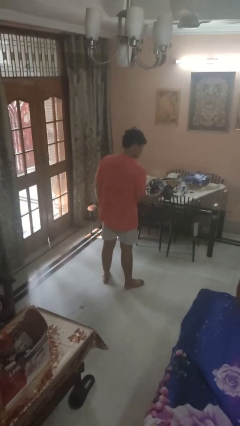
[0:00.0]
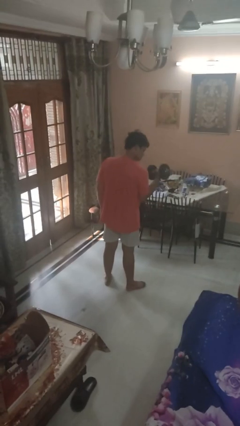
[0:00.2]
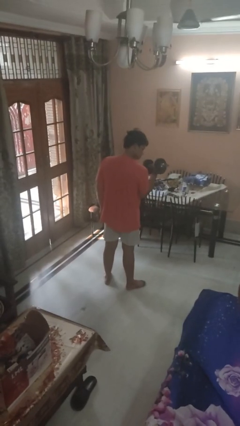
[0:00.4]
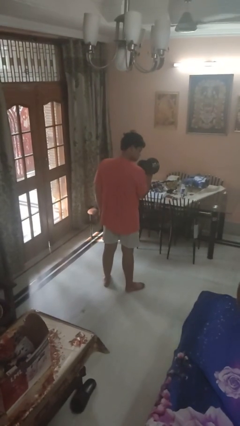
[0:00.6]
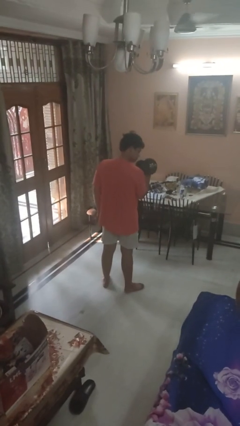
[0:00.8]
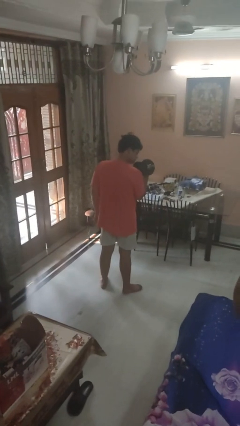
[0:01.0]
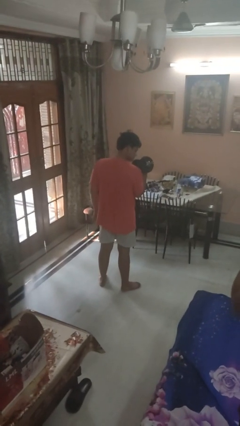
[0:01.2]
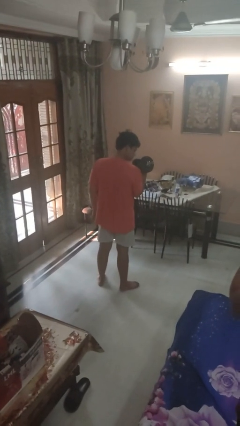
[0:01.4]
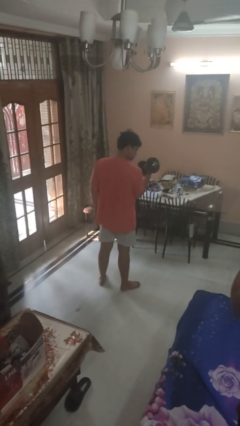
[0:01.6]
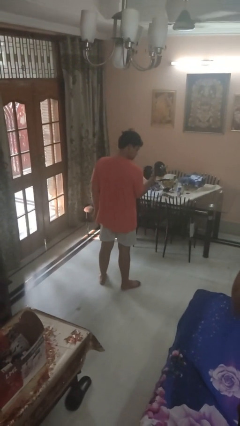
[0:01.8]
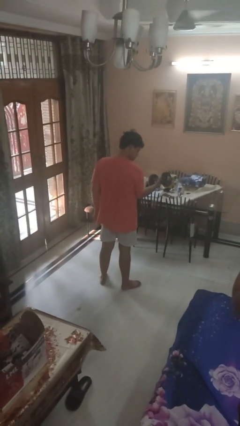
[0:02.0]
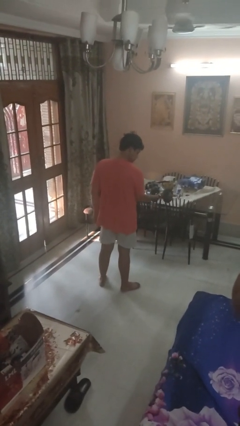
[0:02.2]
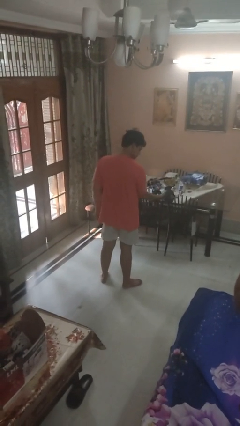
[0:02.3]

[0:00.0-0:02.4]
person lifts dumbbells

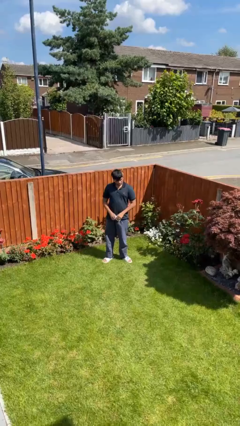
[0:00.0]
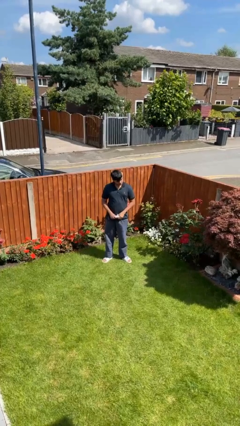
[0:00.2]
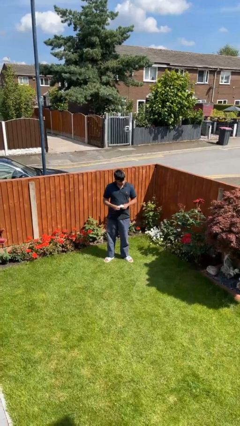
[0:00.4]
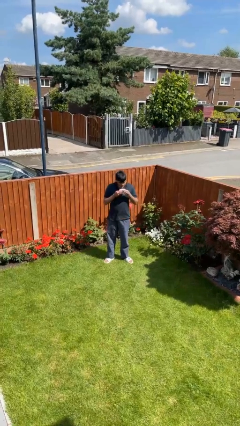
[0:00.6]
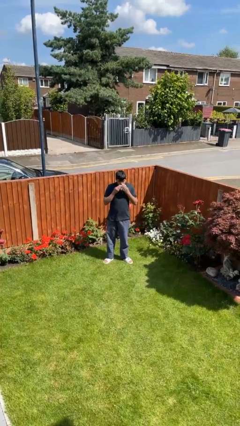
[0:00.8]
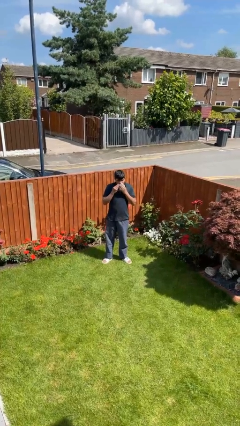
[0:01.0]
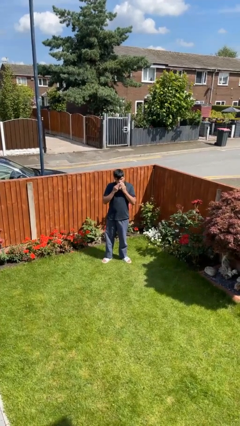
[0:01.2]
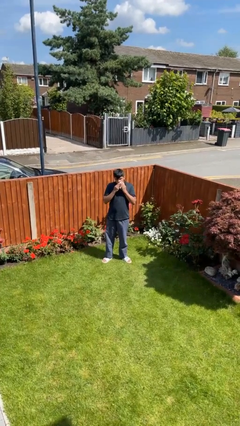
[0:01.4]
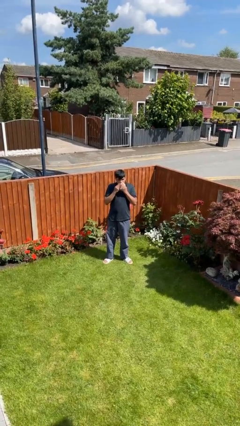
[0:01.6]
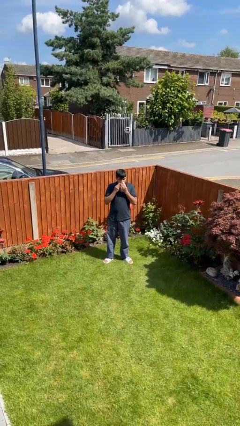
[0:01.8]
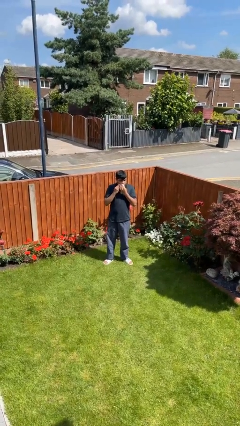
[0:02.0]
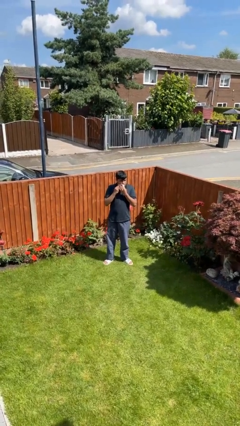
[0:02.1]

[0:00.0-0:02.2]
person wipes mouth with napkin

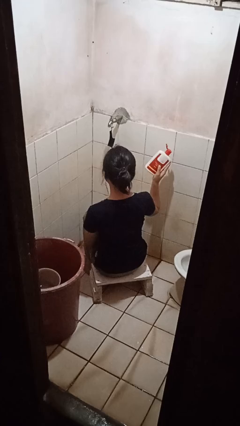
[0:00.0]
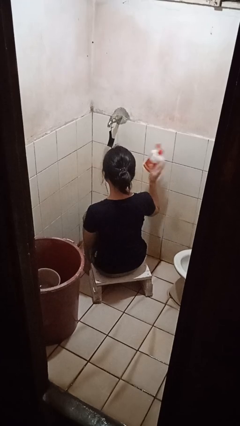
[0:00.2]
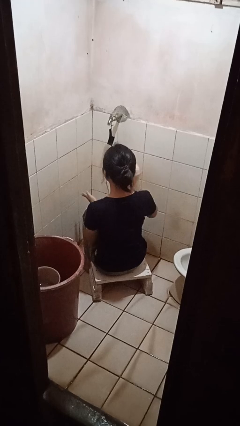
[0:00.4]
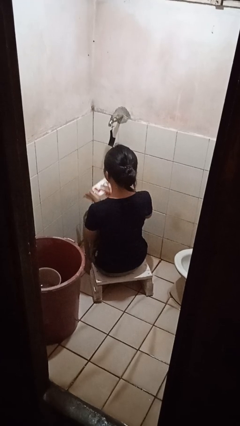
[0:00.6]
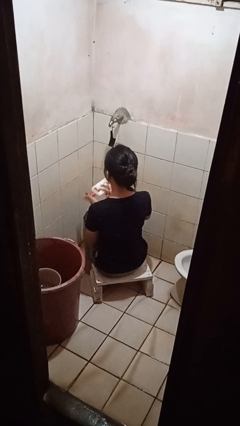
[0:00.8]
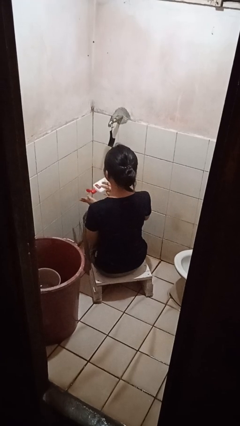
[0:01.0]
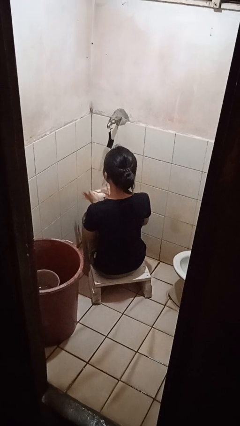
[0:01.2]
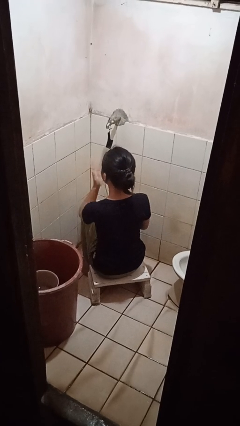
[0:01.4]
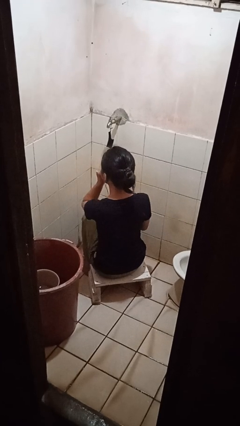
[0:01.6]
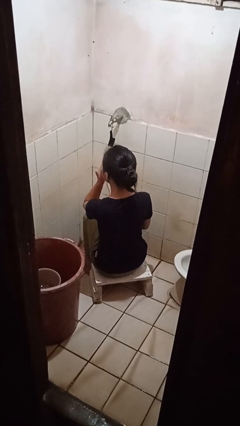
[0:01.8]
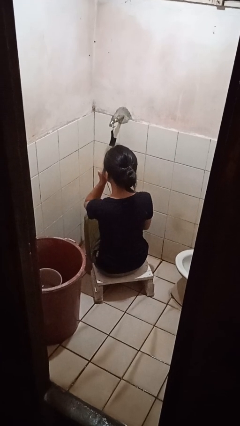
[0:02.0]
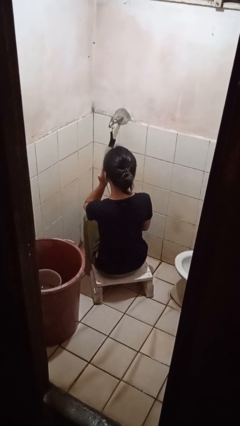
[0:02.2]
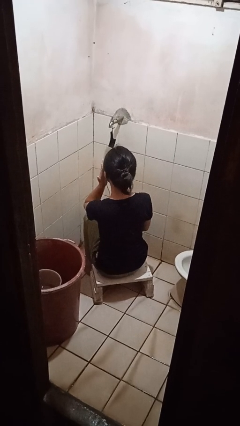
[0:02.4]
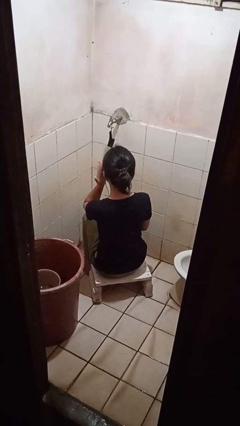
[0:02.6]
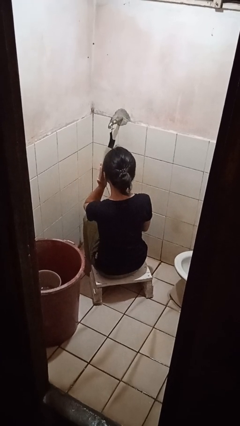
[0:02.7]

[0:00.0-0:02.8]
person applies facial moisturizer

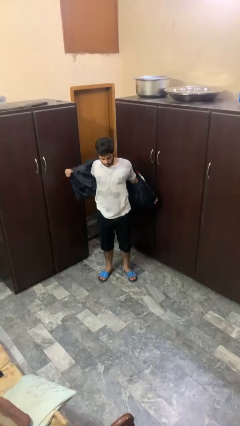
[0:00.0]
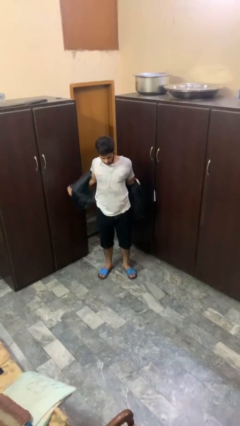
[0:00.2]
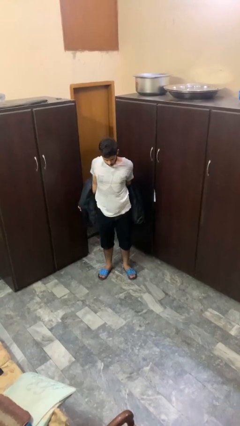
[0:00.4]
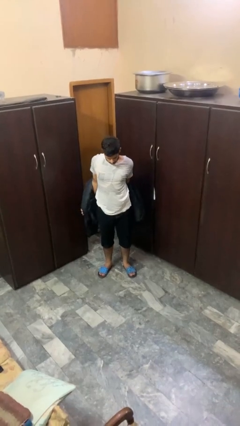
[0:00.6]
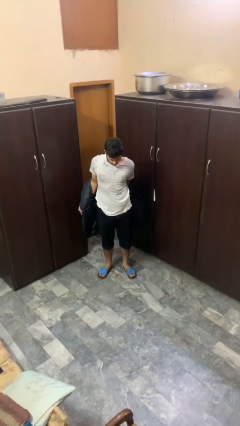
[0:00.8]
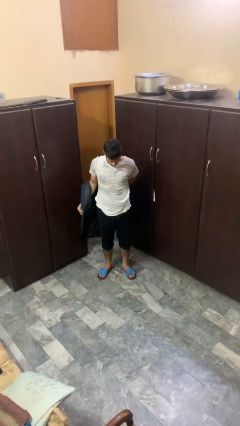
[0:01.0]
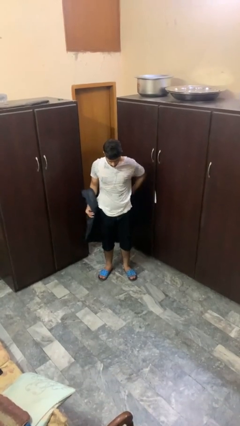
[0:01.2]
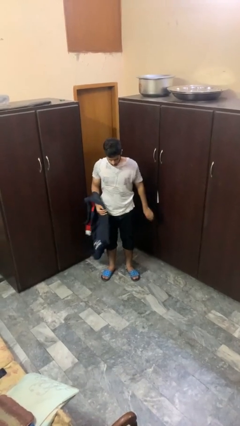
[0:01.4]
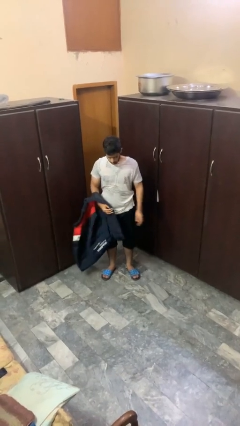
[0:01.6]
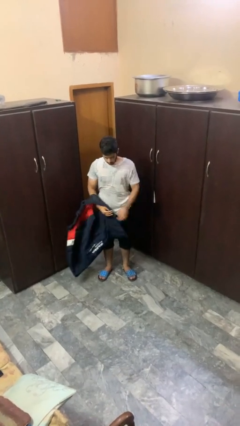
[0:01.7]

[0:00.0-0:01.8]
person takes off jacket

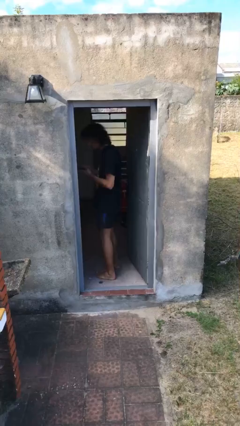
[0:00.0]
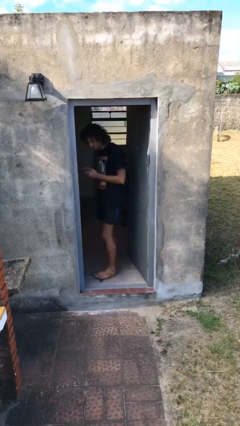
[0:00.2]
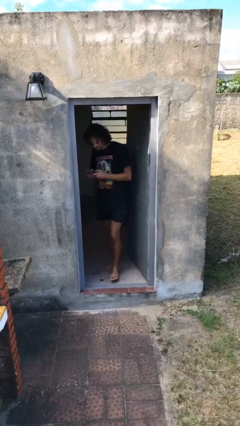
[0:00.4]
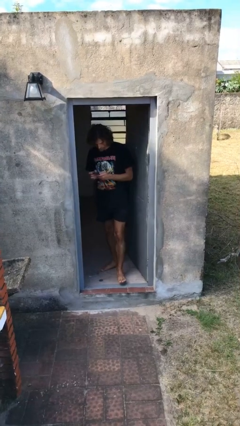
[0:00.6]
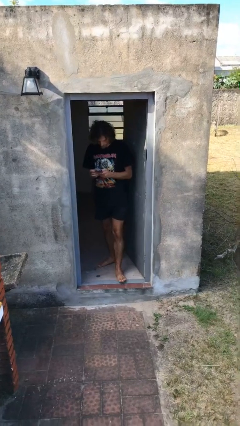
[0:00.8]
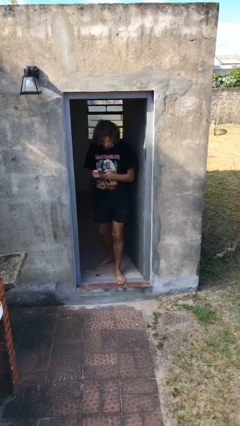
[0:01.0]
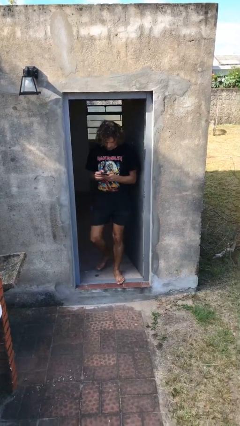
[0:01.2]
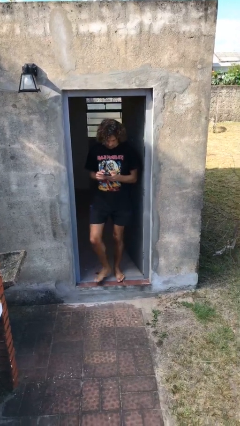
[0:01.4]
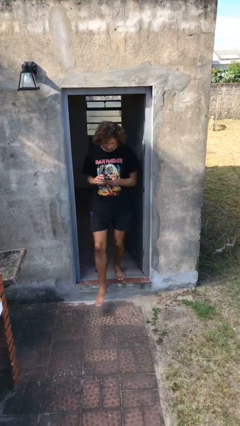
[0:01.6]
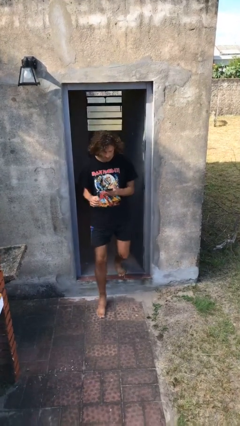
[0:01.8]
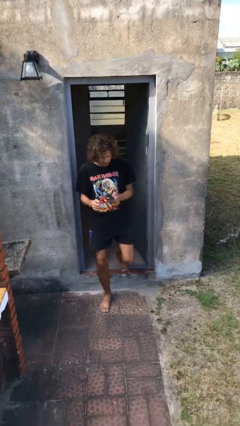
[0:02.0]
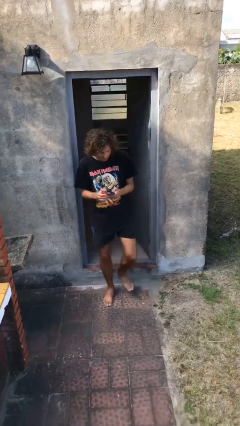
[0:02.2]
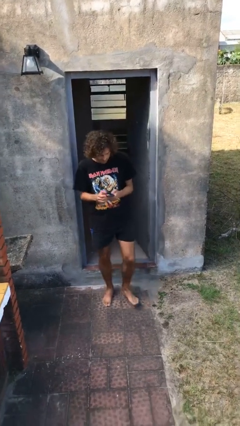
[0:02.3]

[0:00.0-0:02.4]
person enters scene through structure

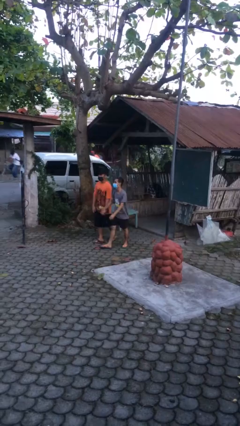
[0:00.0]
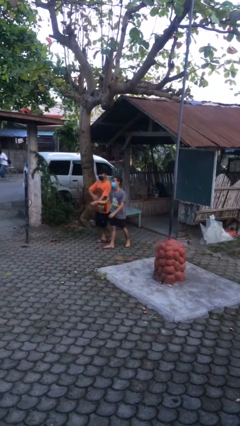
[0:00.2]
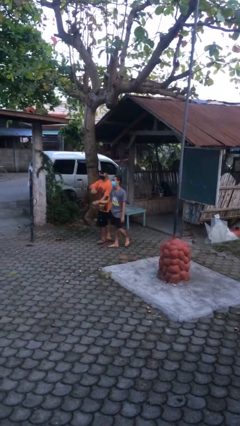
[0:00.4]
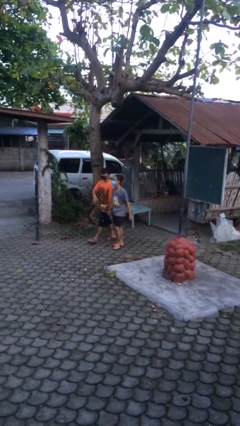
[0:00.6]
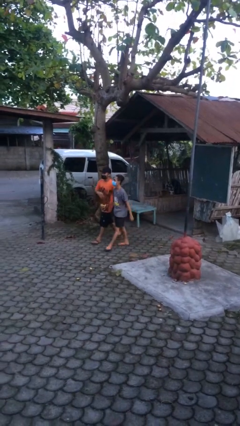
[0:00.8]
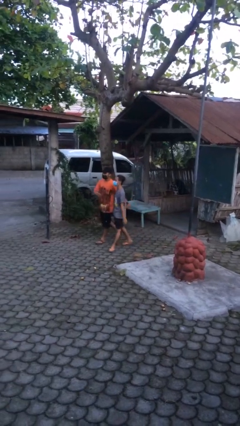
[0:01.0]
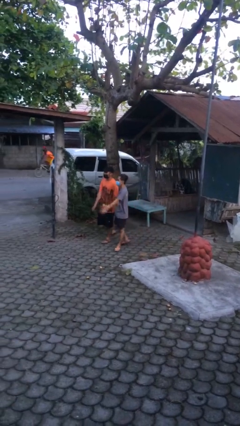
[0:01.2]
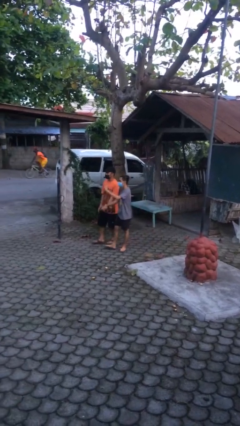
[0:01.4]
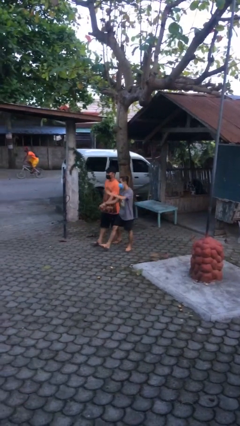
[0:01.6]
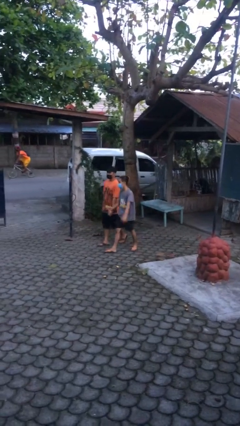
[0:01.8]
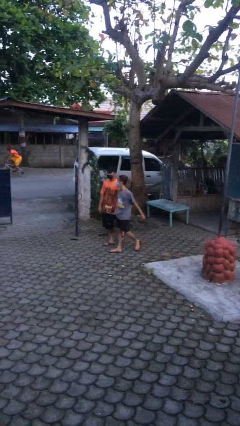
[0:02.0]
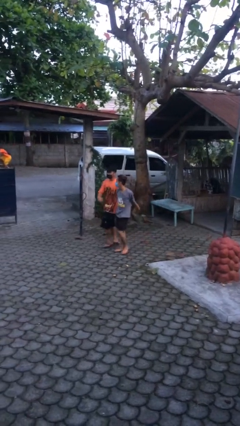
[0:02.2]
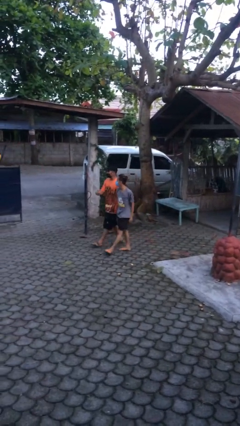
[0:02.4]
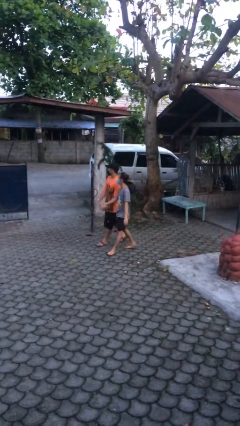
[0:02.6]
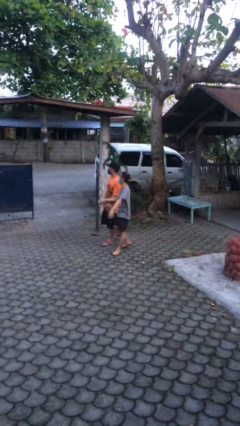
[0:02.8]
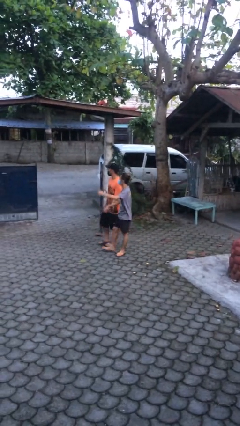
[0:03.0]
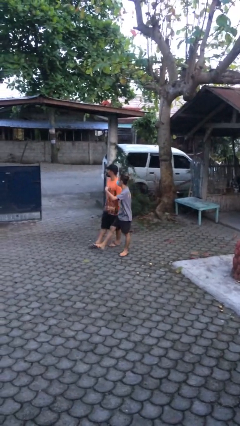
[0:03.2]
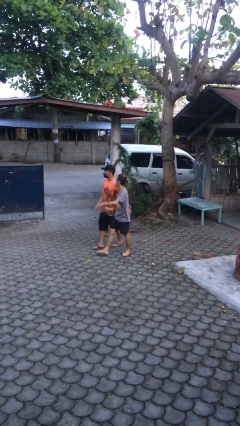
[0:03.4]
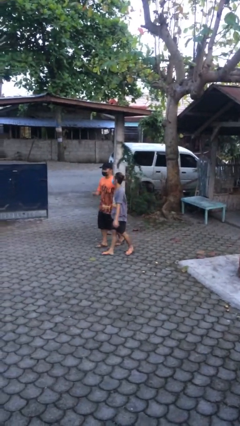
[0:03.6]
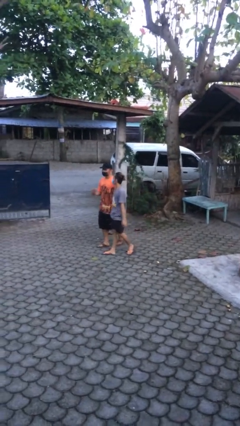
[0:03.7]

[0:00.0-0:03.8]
person holds hand

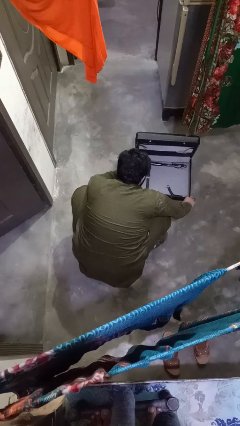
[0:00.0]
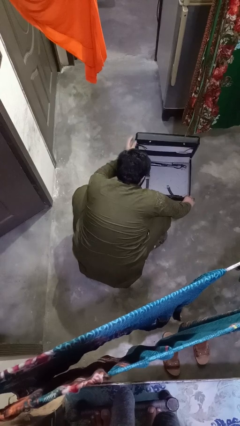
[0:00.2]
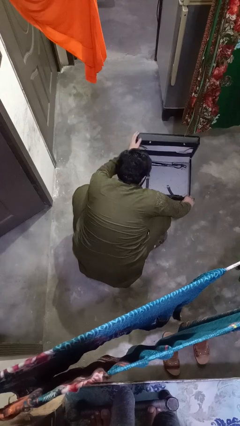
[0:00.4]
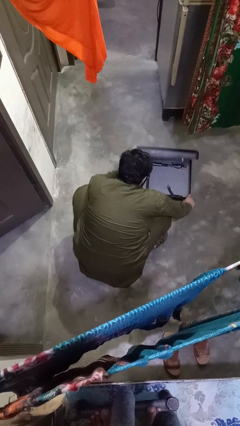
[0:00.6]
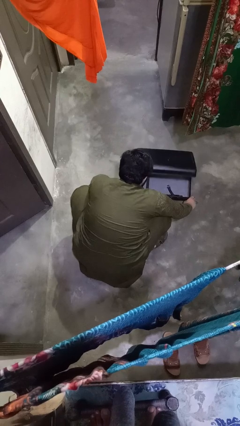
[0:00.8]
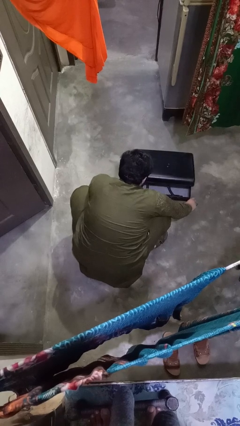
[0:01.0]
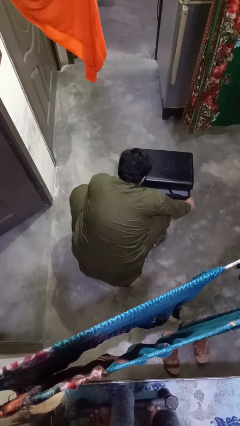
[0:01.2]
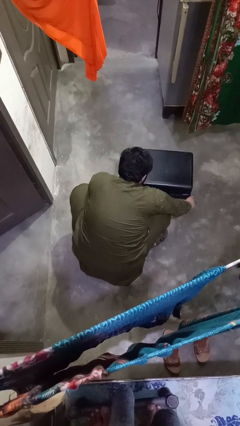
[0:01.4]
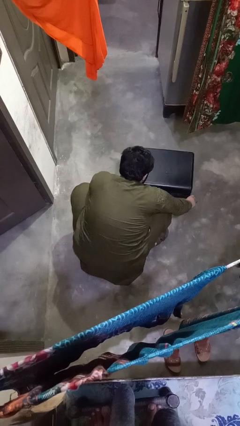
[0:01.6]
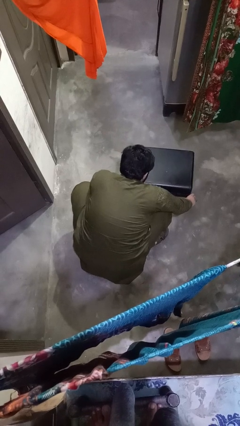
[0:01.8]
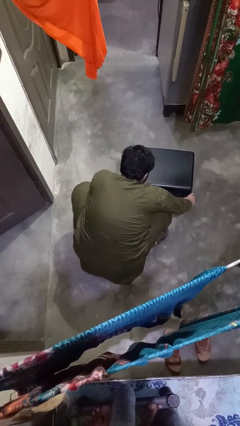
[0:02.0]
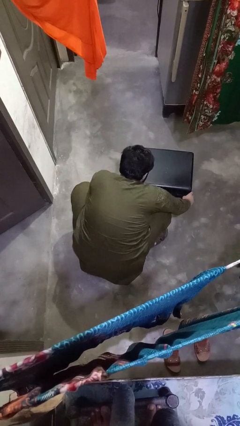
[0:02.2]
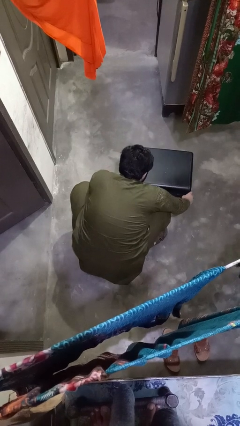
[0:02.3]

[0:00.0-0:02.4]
person closes suitcase
